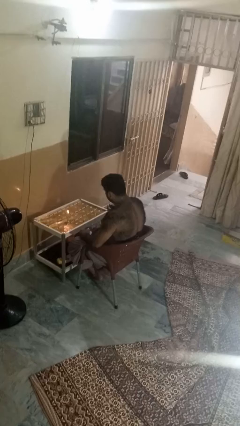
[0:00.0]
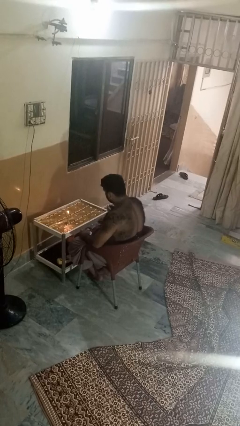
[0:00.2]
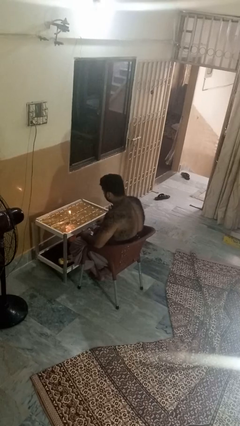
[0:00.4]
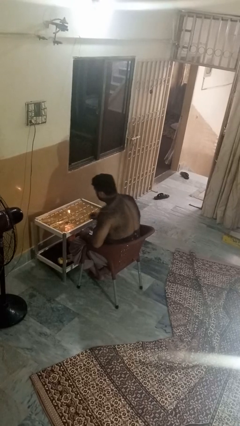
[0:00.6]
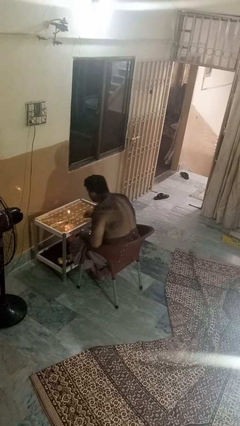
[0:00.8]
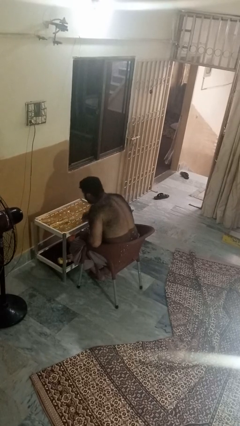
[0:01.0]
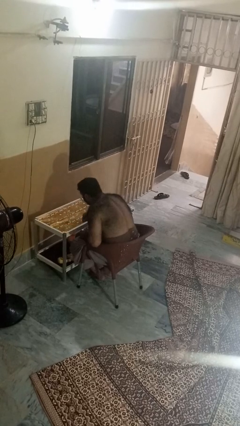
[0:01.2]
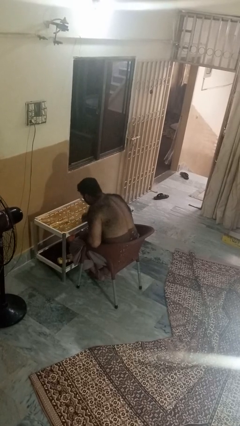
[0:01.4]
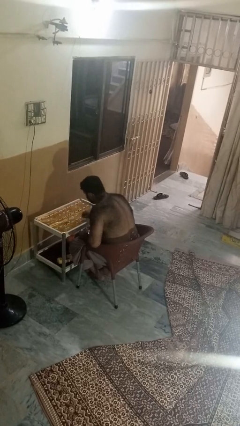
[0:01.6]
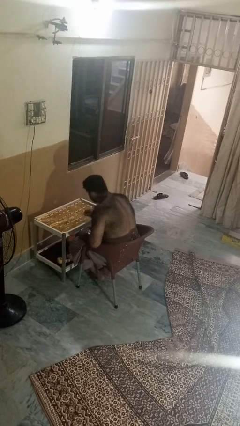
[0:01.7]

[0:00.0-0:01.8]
person extinguishes candle

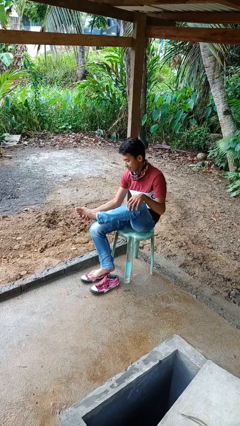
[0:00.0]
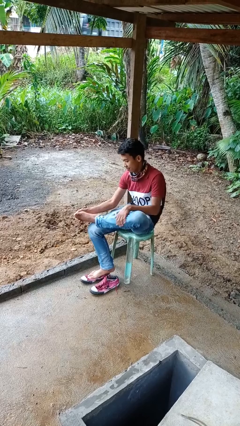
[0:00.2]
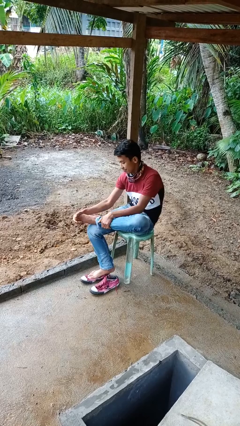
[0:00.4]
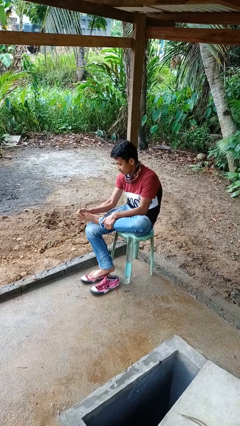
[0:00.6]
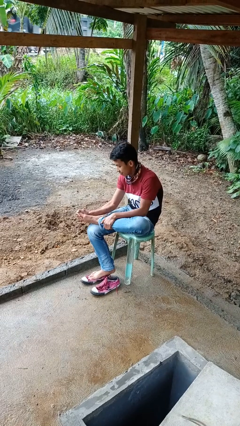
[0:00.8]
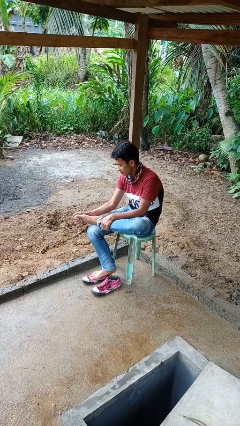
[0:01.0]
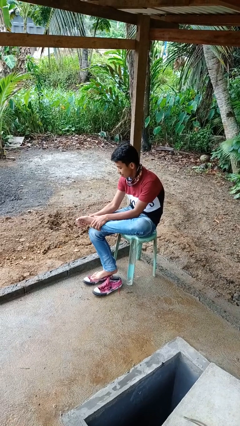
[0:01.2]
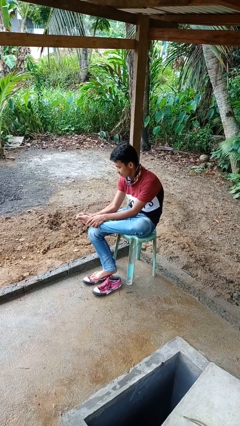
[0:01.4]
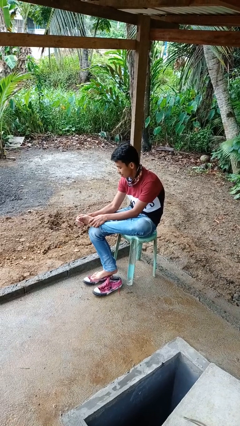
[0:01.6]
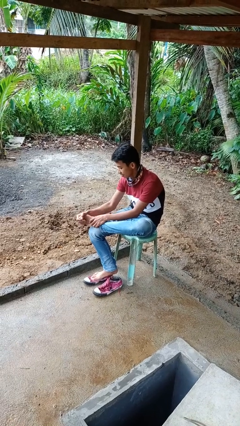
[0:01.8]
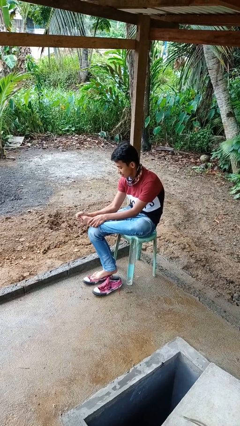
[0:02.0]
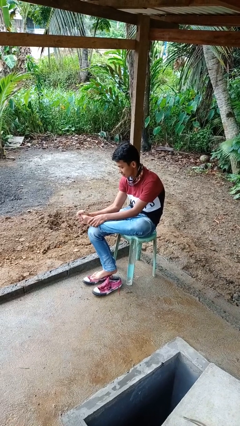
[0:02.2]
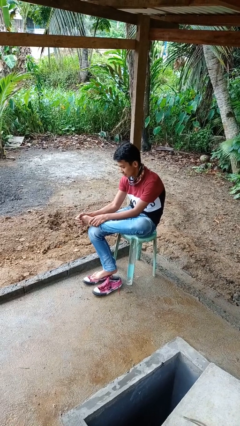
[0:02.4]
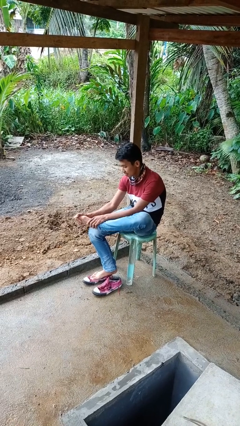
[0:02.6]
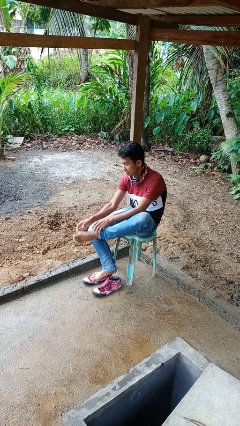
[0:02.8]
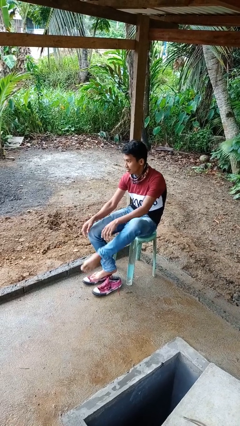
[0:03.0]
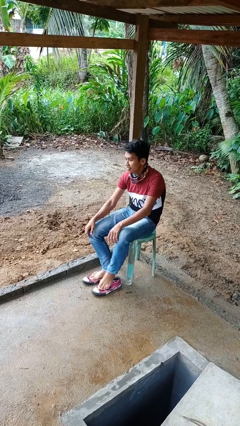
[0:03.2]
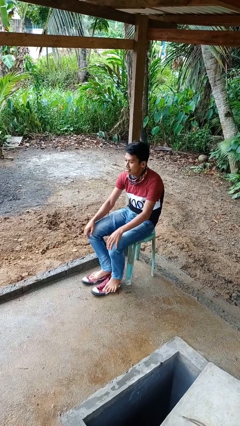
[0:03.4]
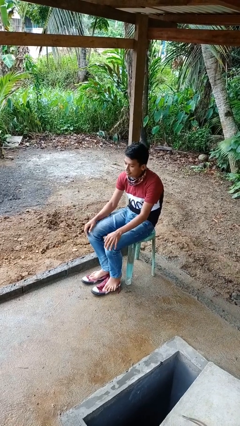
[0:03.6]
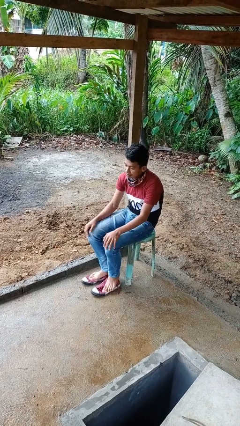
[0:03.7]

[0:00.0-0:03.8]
person rubs foot

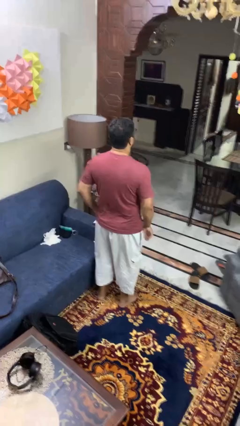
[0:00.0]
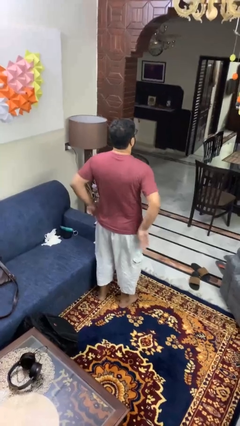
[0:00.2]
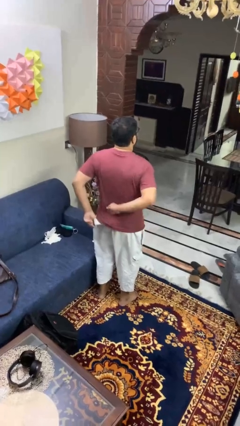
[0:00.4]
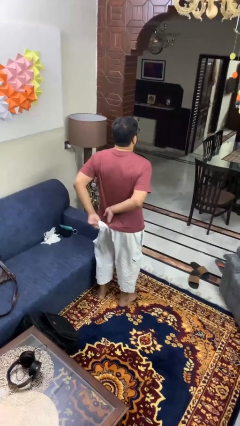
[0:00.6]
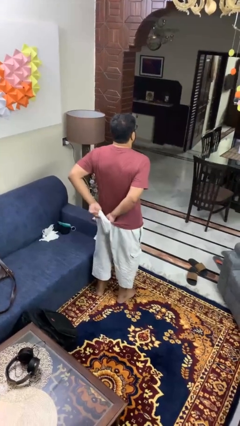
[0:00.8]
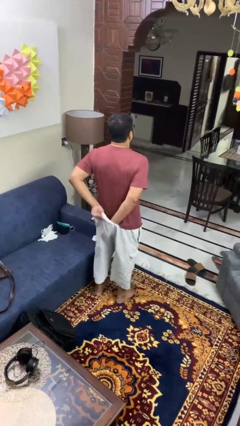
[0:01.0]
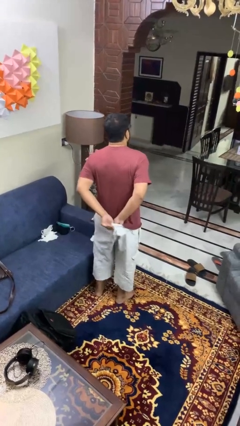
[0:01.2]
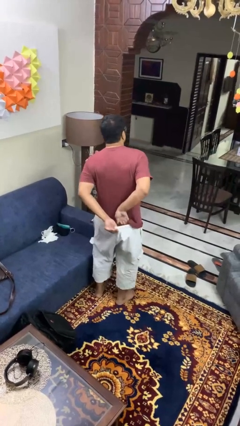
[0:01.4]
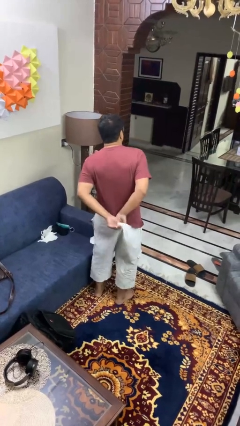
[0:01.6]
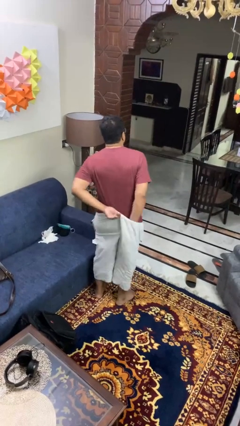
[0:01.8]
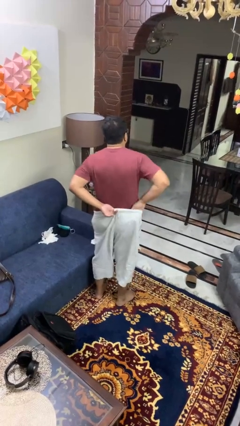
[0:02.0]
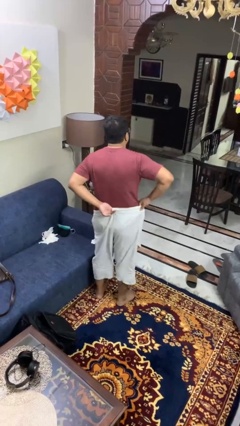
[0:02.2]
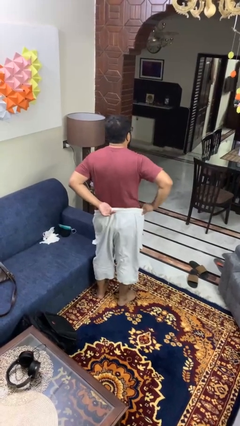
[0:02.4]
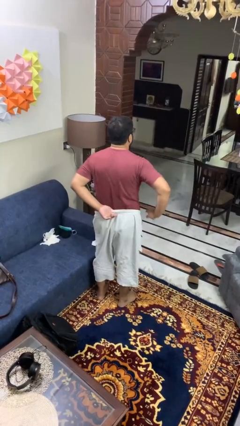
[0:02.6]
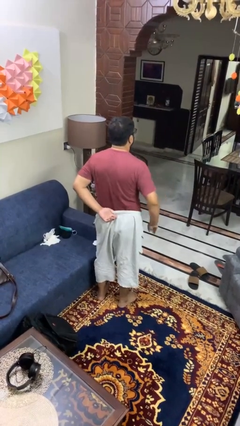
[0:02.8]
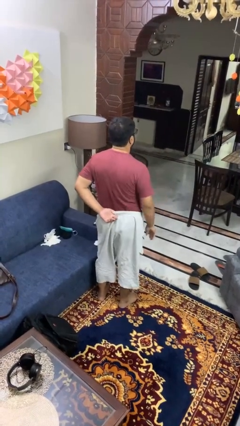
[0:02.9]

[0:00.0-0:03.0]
person tucks in shirt

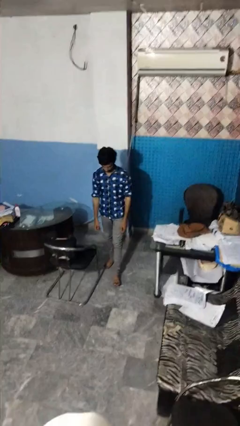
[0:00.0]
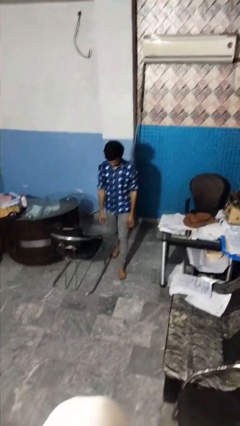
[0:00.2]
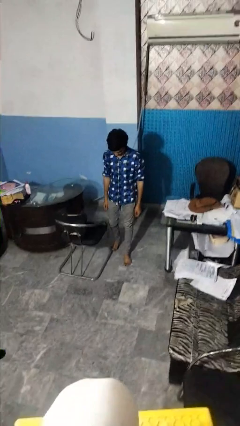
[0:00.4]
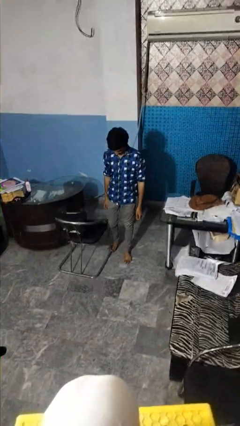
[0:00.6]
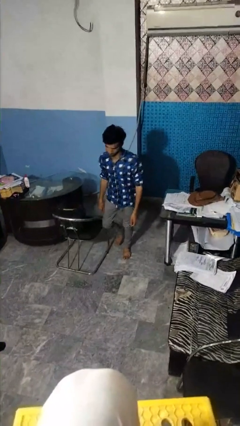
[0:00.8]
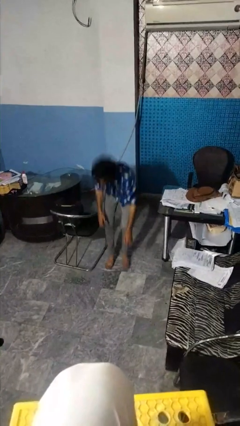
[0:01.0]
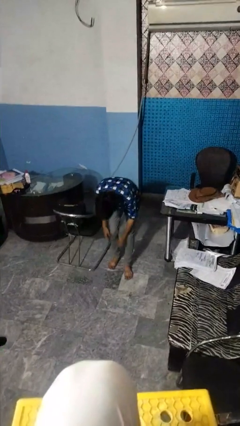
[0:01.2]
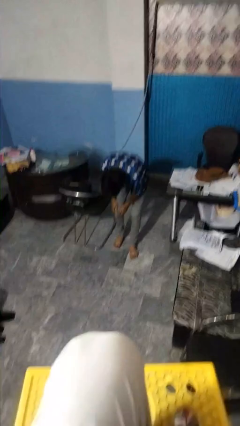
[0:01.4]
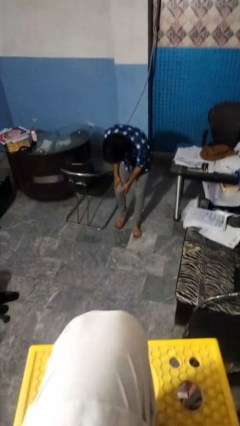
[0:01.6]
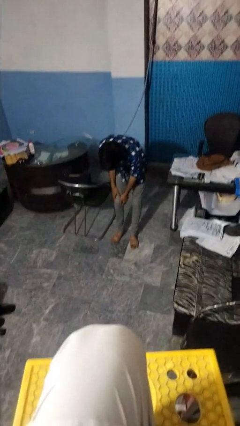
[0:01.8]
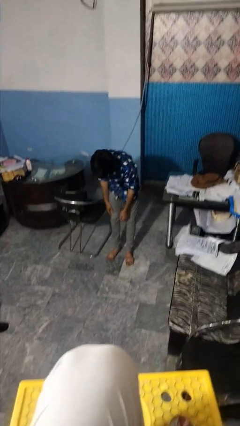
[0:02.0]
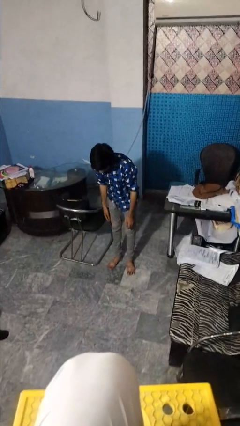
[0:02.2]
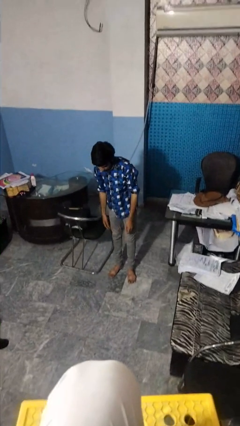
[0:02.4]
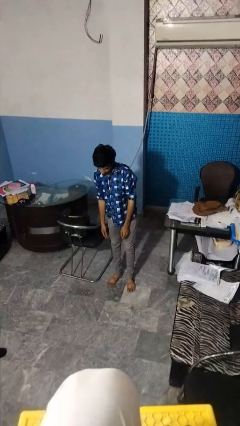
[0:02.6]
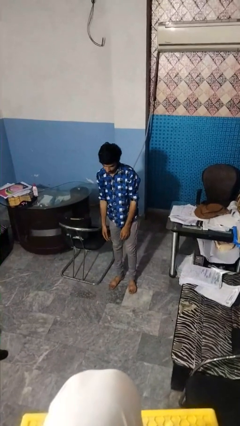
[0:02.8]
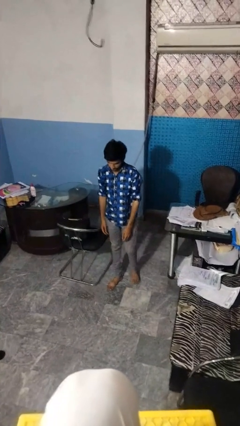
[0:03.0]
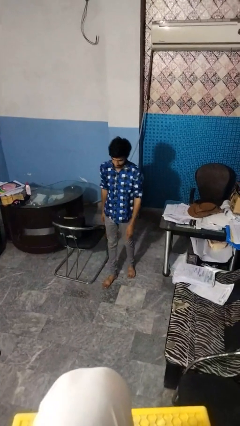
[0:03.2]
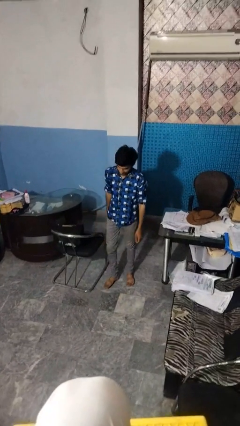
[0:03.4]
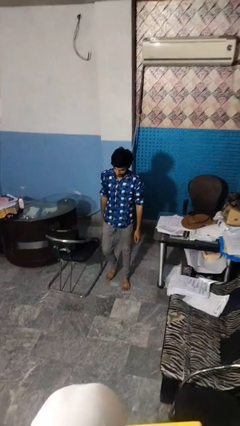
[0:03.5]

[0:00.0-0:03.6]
person stubs toe

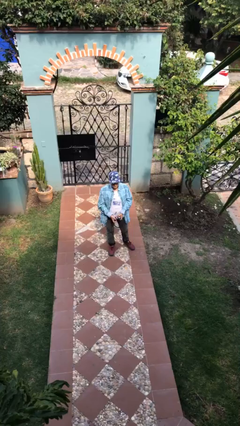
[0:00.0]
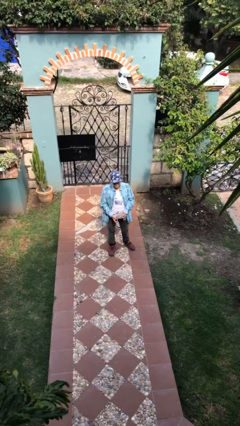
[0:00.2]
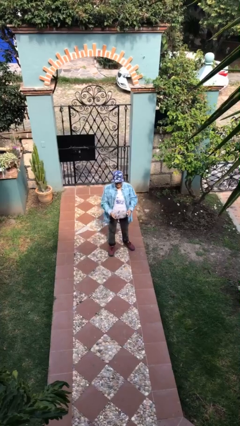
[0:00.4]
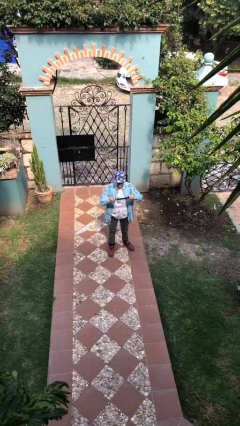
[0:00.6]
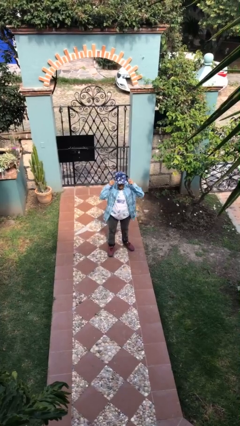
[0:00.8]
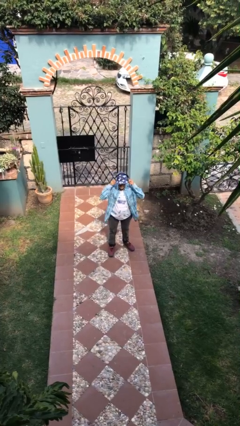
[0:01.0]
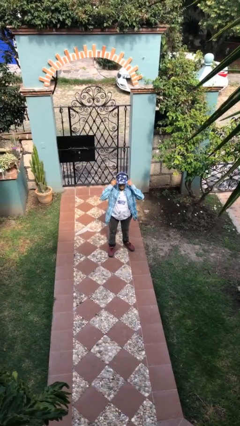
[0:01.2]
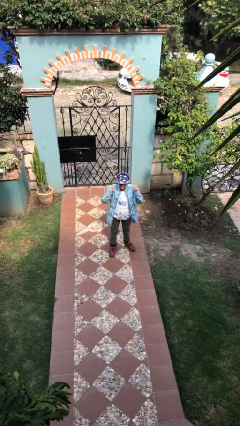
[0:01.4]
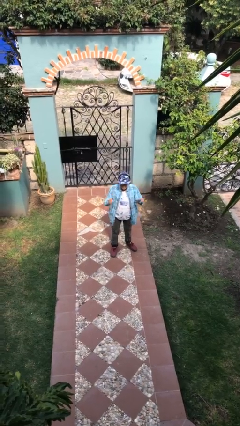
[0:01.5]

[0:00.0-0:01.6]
person puts on headphones

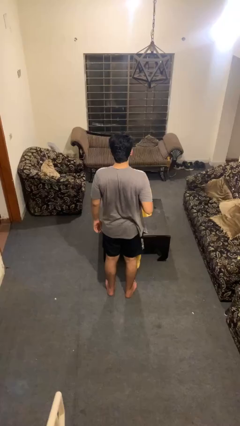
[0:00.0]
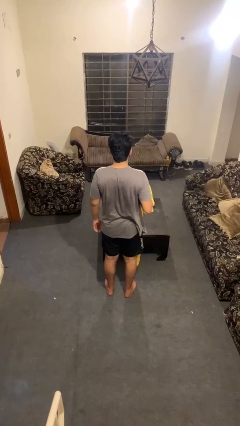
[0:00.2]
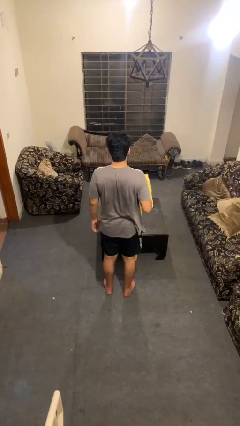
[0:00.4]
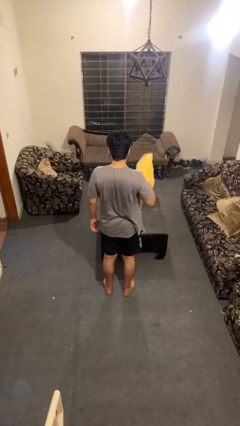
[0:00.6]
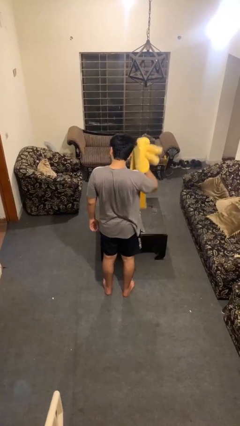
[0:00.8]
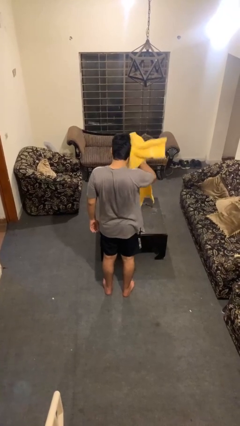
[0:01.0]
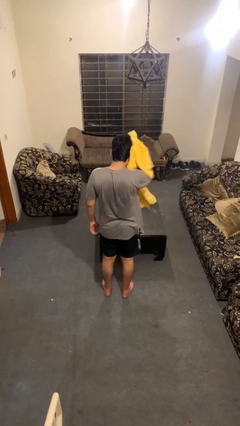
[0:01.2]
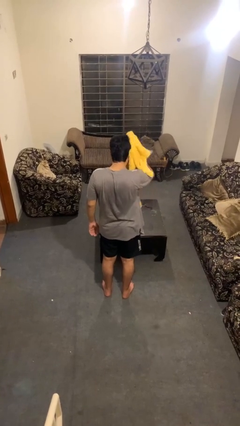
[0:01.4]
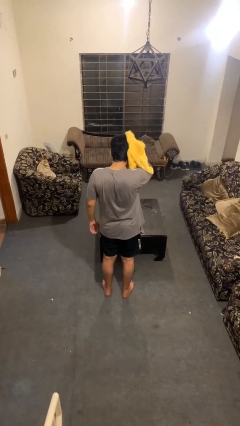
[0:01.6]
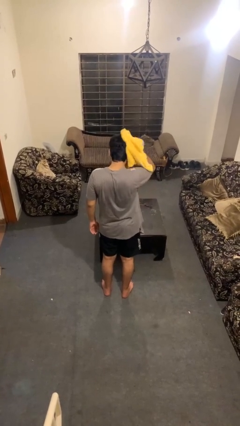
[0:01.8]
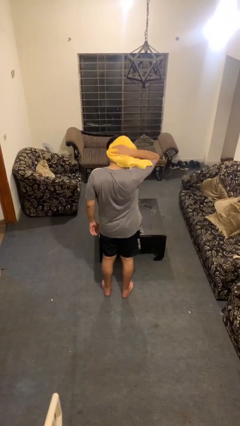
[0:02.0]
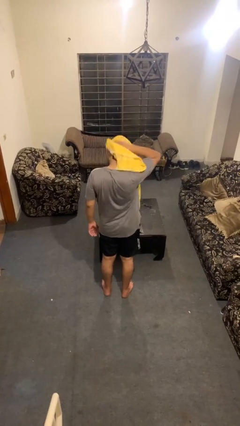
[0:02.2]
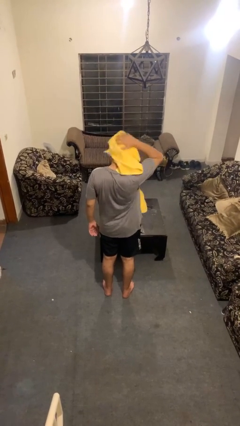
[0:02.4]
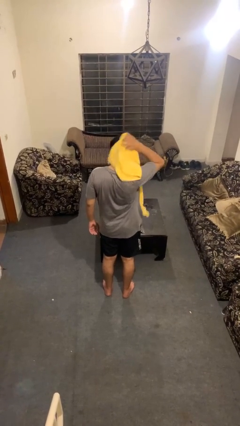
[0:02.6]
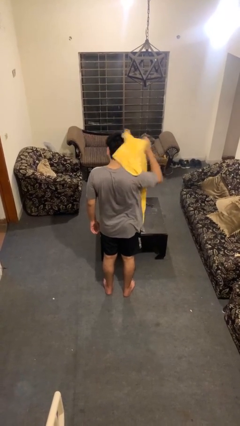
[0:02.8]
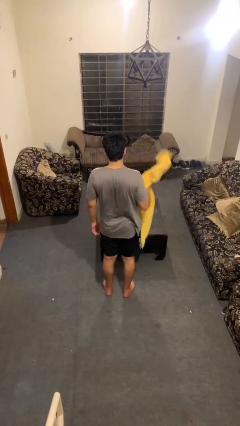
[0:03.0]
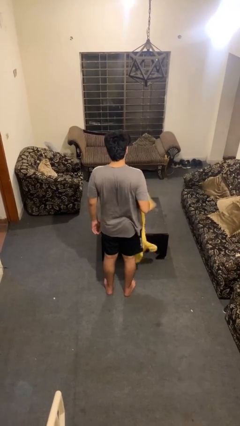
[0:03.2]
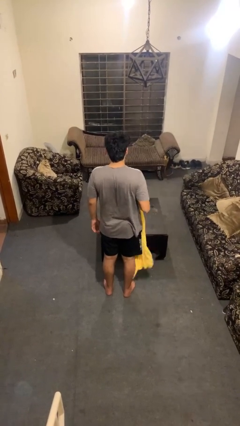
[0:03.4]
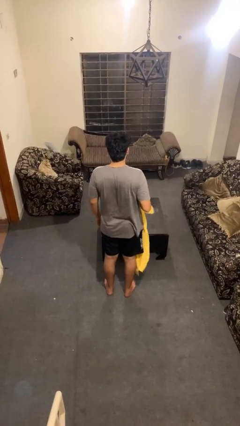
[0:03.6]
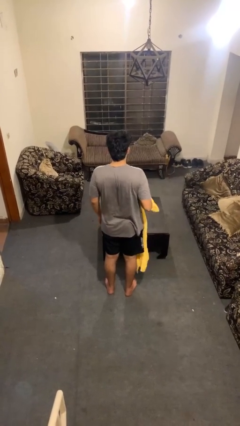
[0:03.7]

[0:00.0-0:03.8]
person dries hair with towel
